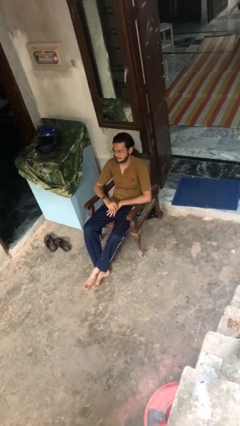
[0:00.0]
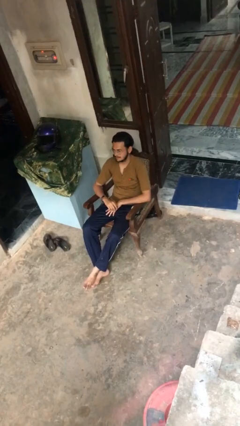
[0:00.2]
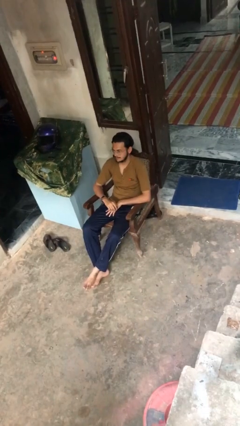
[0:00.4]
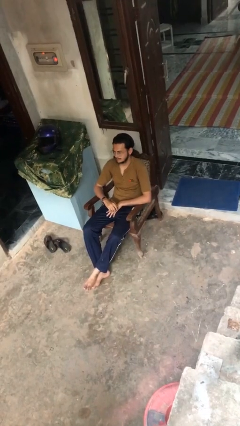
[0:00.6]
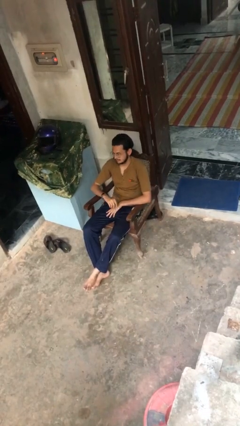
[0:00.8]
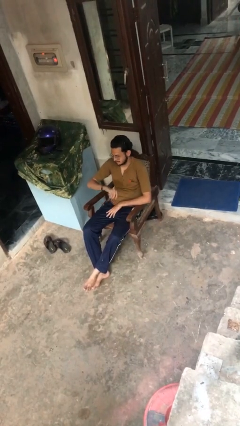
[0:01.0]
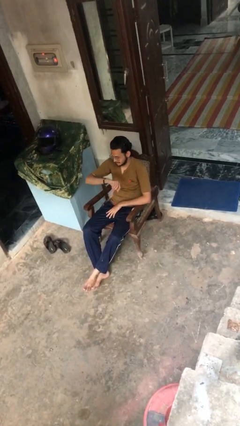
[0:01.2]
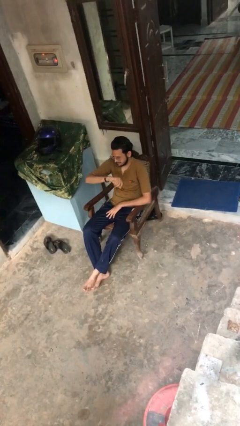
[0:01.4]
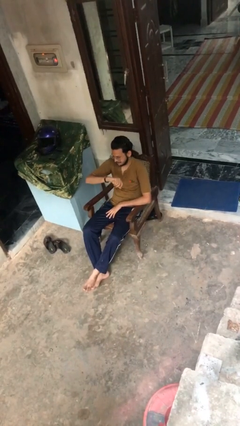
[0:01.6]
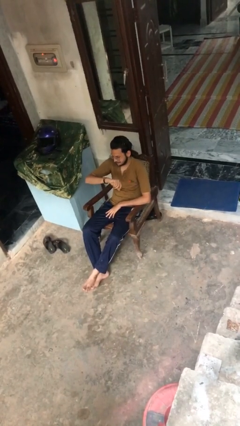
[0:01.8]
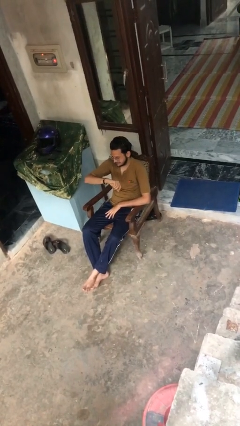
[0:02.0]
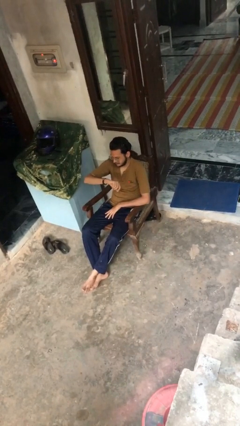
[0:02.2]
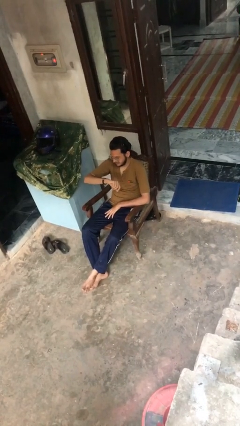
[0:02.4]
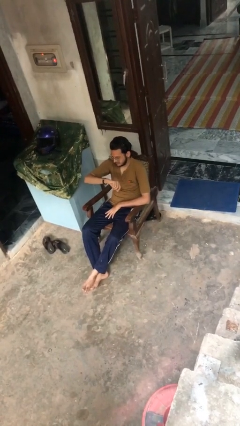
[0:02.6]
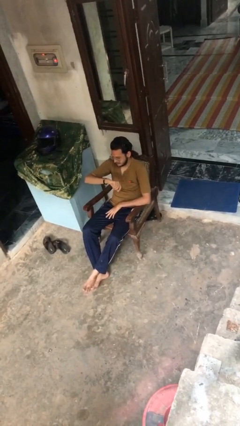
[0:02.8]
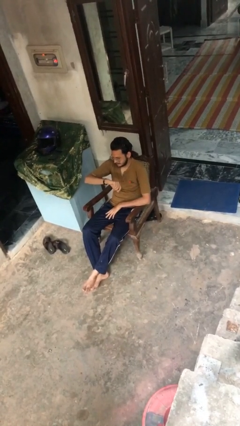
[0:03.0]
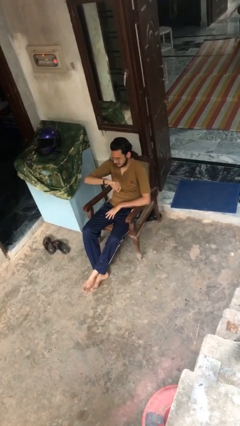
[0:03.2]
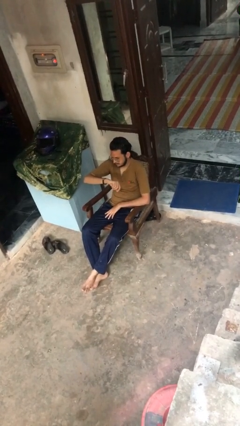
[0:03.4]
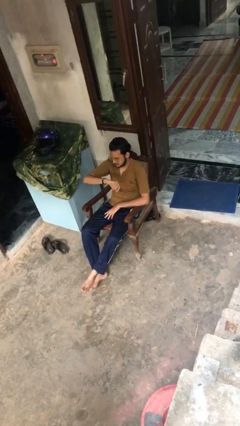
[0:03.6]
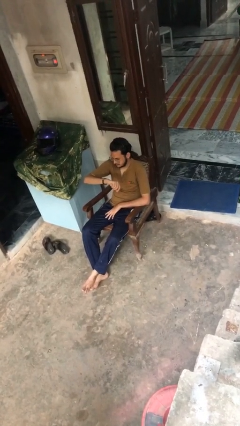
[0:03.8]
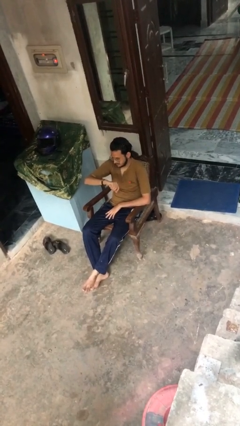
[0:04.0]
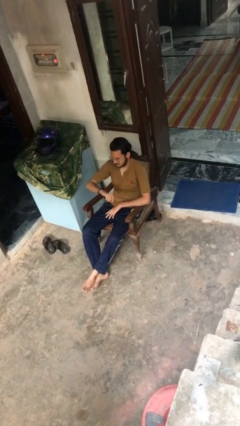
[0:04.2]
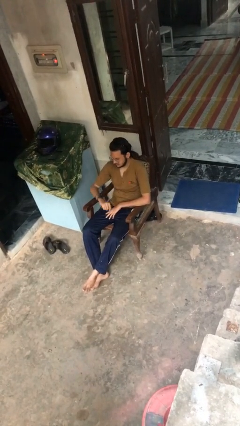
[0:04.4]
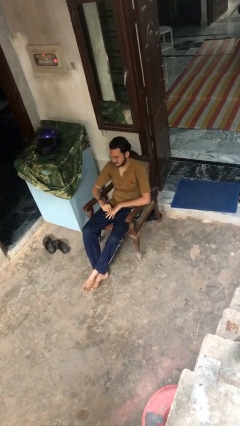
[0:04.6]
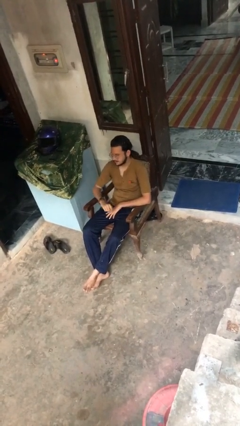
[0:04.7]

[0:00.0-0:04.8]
person looks at wristwatch

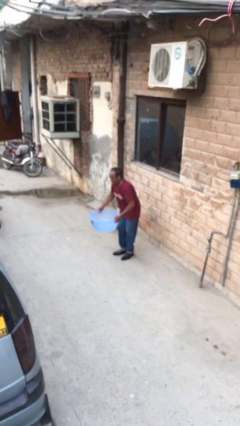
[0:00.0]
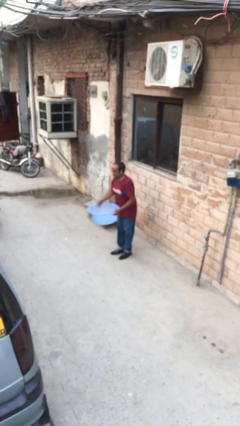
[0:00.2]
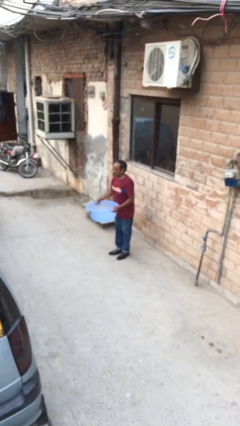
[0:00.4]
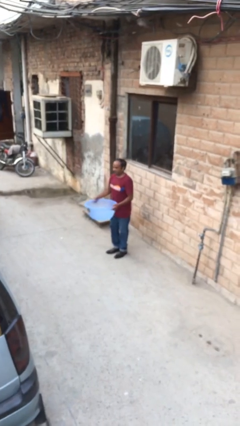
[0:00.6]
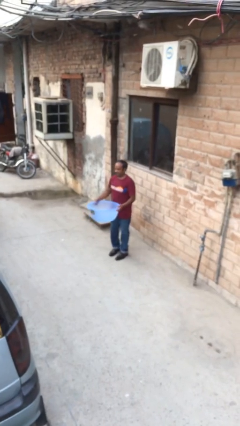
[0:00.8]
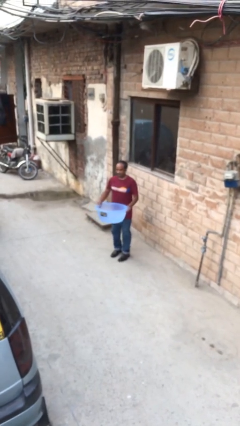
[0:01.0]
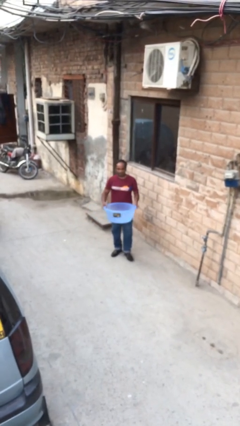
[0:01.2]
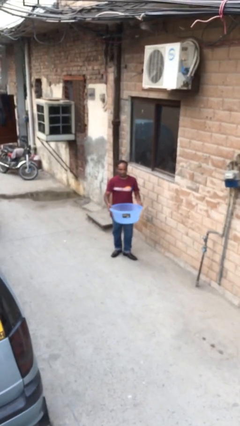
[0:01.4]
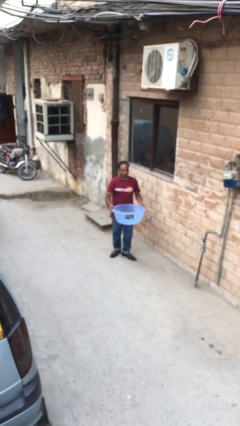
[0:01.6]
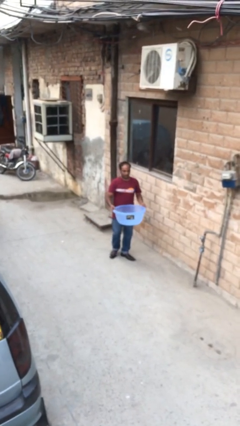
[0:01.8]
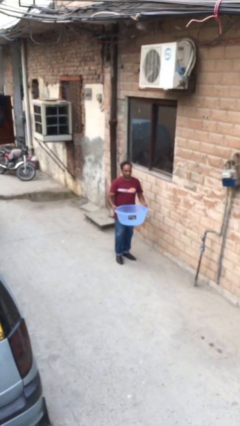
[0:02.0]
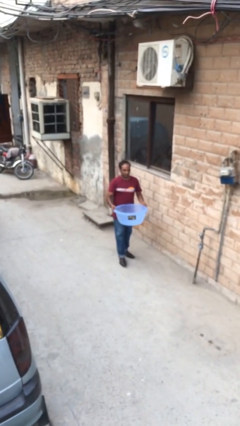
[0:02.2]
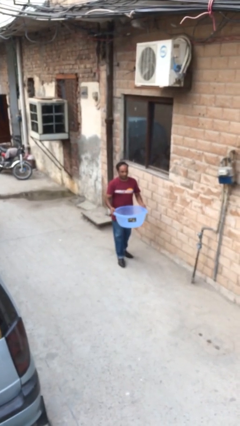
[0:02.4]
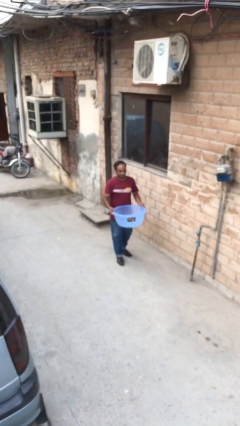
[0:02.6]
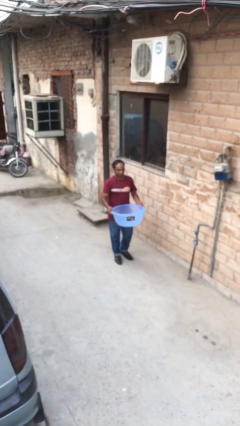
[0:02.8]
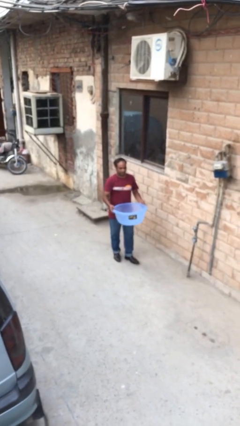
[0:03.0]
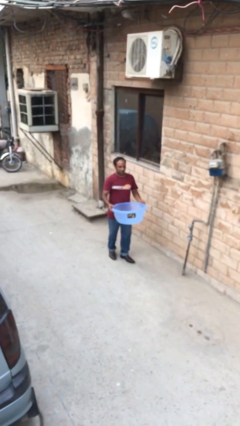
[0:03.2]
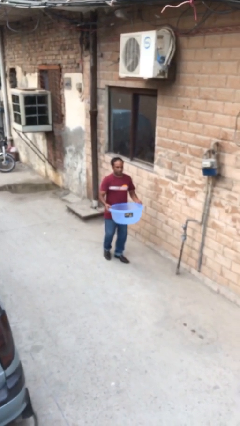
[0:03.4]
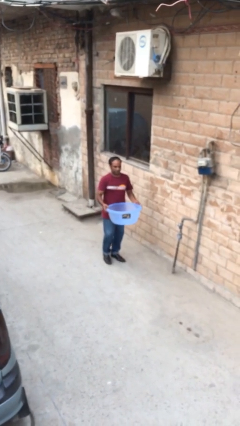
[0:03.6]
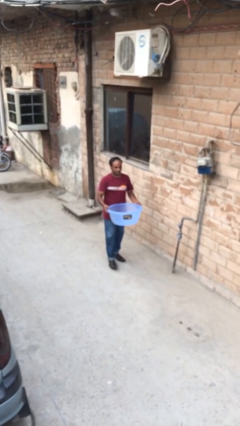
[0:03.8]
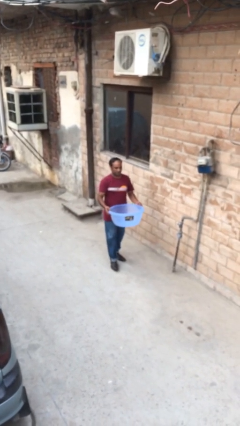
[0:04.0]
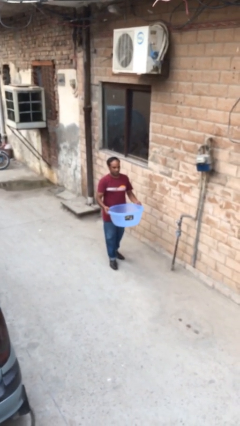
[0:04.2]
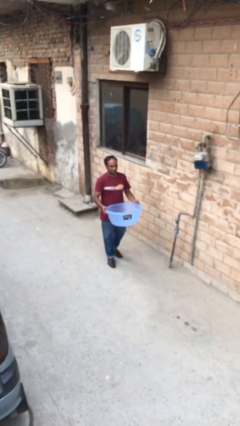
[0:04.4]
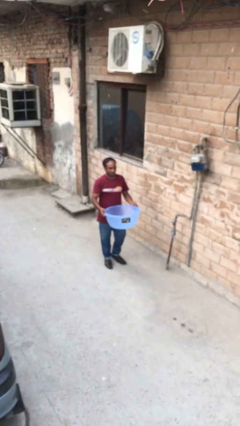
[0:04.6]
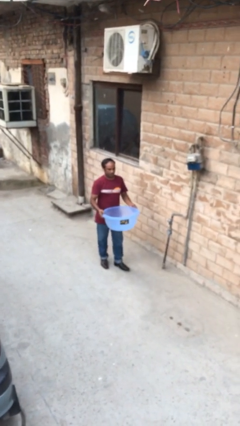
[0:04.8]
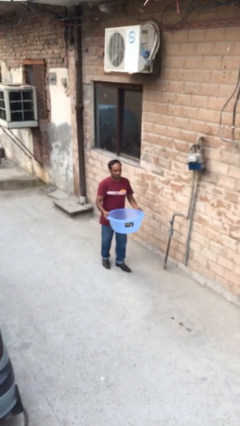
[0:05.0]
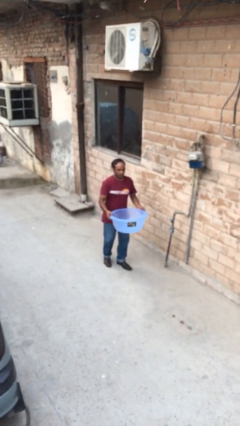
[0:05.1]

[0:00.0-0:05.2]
person carries heavy object

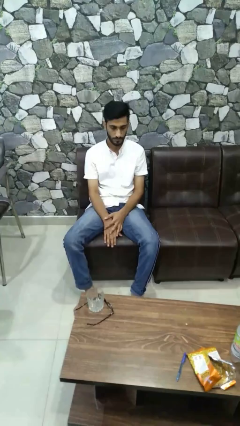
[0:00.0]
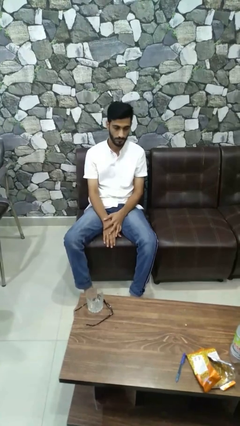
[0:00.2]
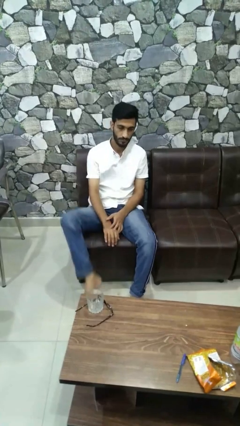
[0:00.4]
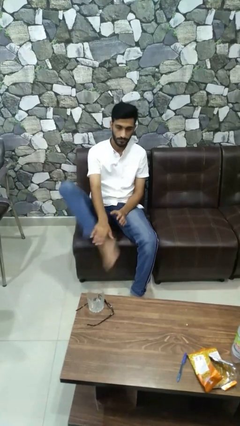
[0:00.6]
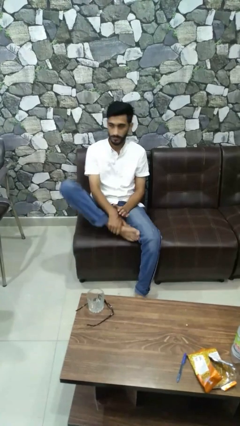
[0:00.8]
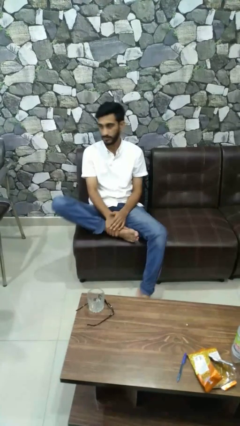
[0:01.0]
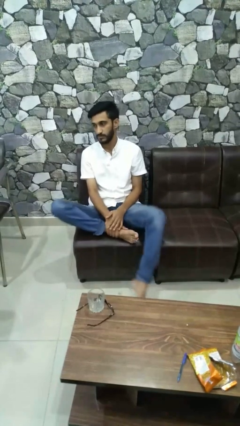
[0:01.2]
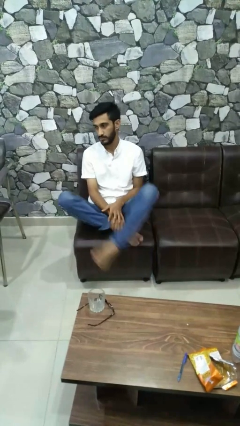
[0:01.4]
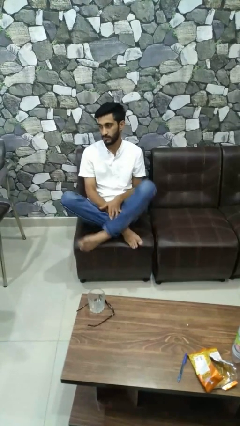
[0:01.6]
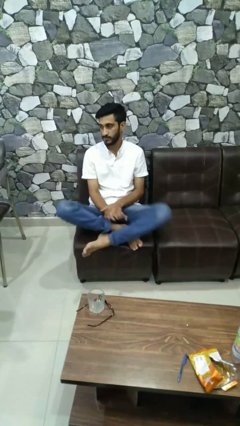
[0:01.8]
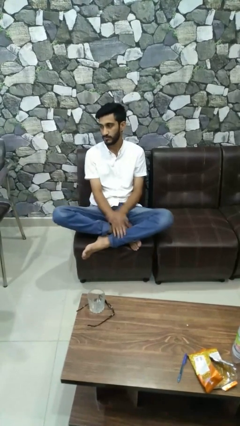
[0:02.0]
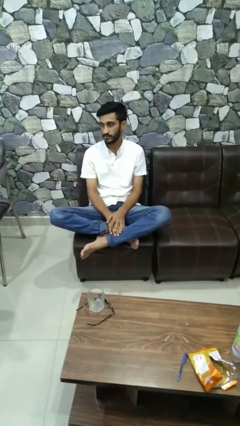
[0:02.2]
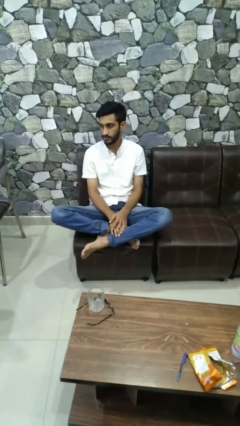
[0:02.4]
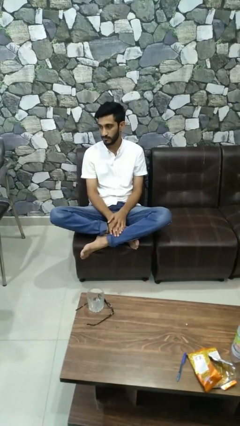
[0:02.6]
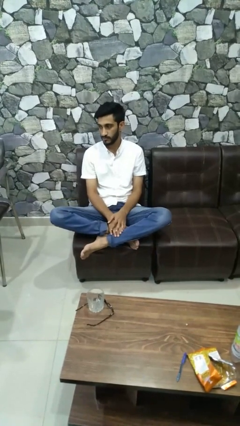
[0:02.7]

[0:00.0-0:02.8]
person crosses legs

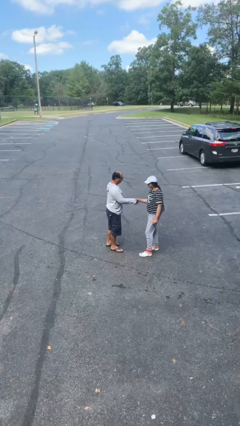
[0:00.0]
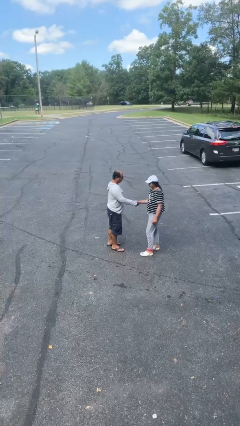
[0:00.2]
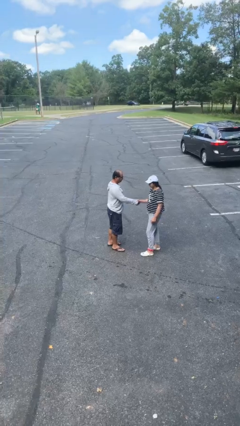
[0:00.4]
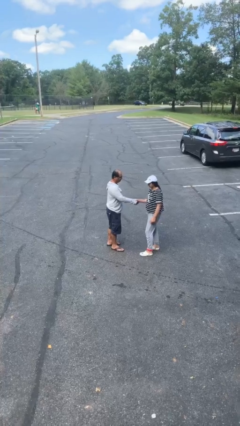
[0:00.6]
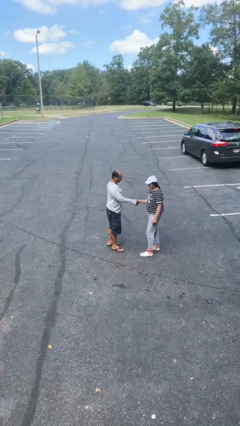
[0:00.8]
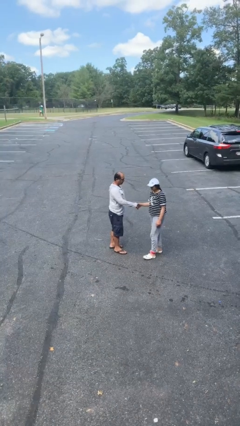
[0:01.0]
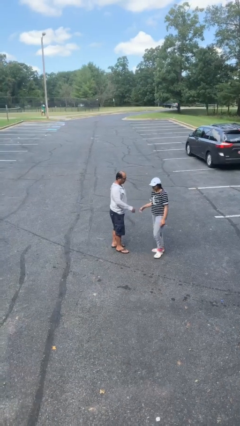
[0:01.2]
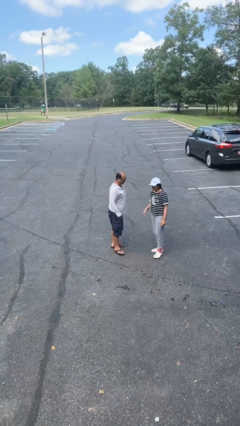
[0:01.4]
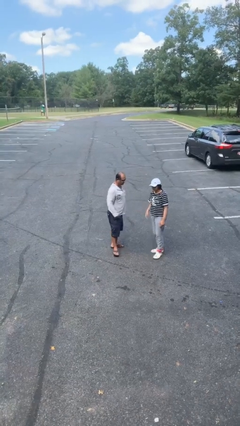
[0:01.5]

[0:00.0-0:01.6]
person shakes hand

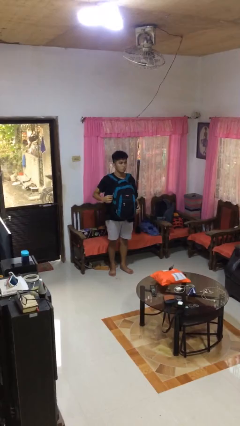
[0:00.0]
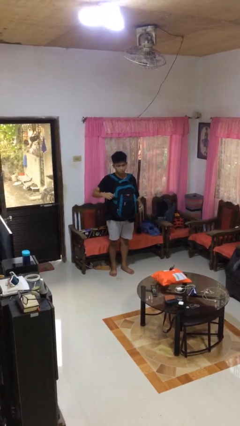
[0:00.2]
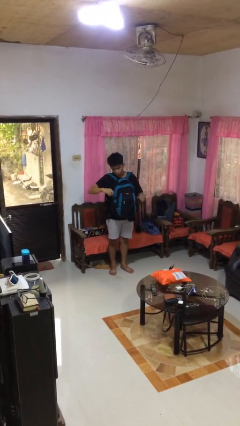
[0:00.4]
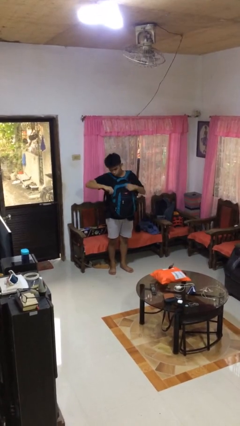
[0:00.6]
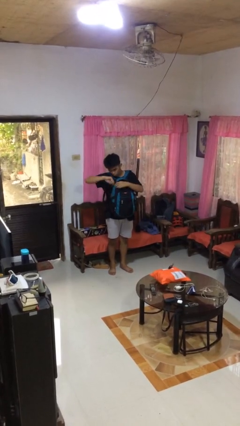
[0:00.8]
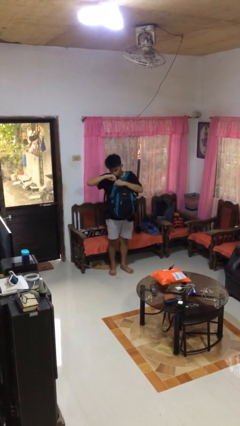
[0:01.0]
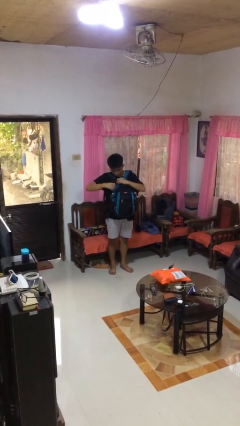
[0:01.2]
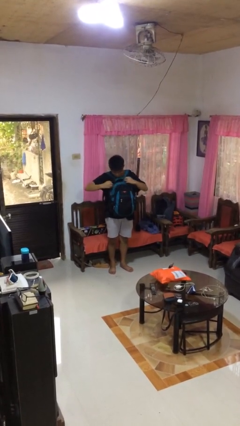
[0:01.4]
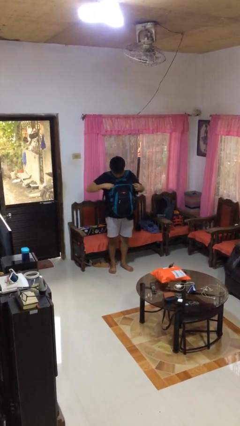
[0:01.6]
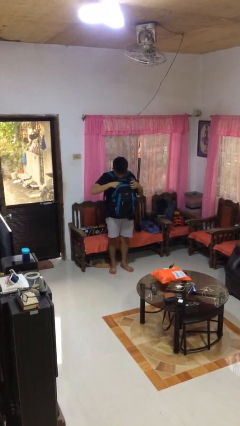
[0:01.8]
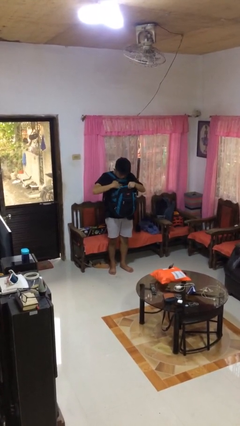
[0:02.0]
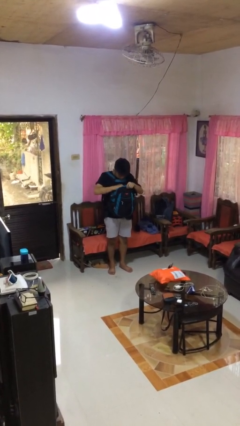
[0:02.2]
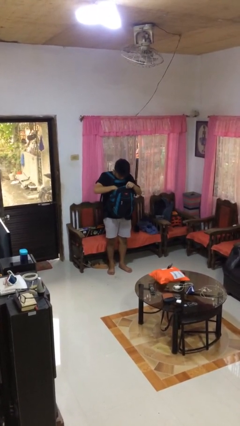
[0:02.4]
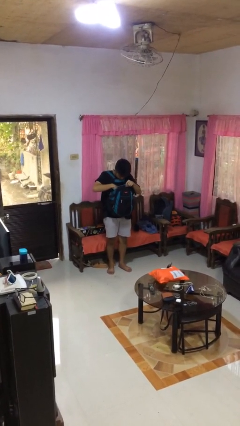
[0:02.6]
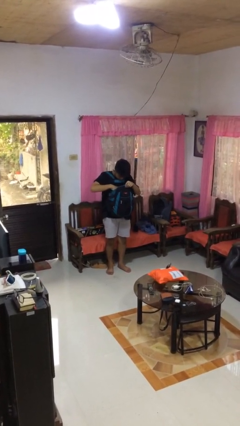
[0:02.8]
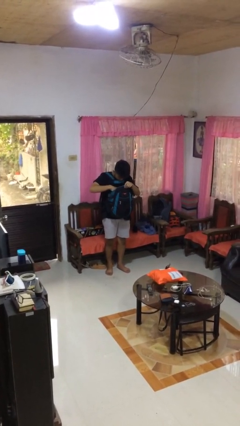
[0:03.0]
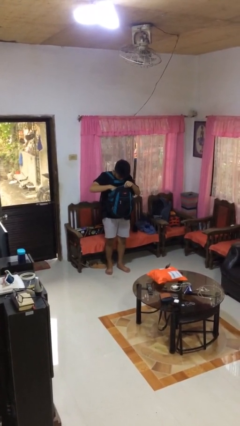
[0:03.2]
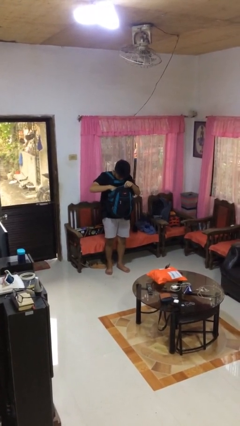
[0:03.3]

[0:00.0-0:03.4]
person searches in backpack
